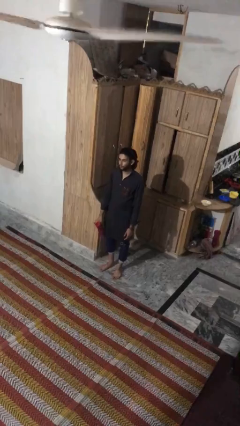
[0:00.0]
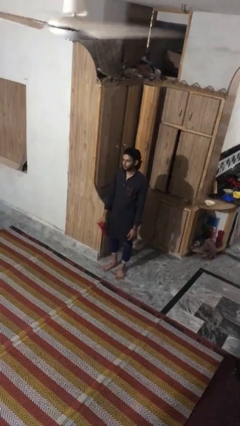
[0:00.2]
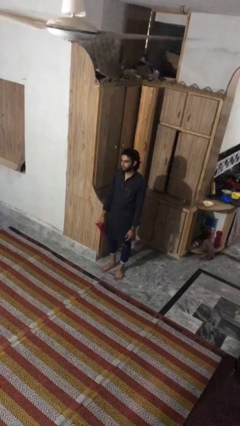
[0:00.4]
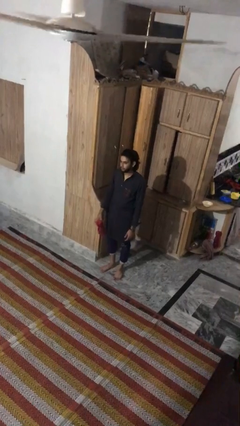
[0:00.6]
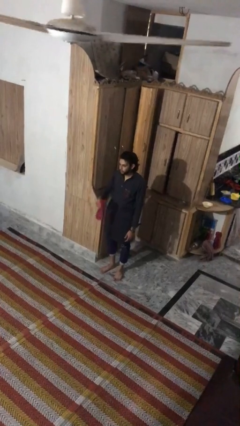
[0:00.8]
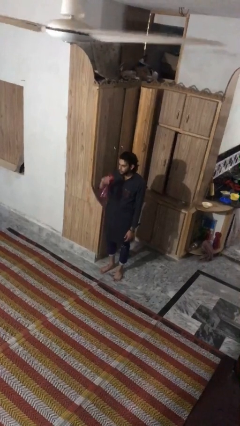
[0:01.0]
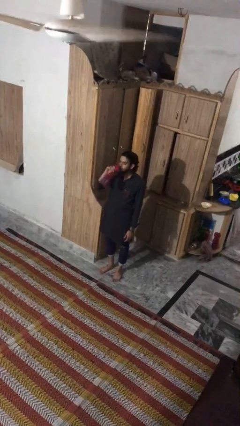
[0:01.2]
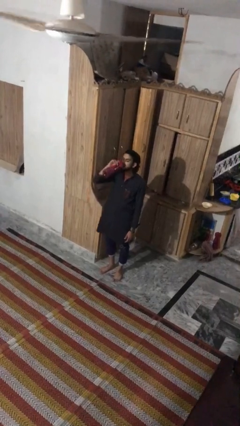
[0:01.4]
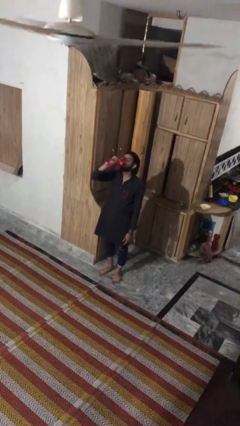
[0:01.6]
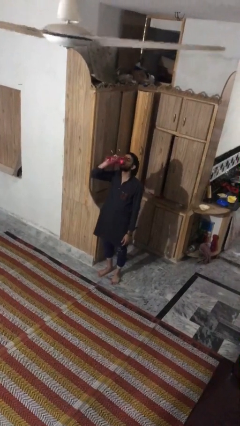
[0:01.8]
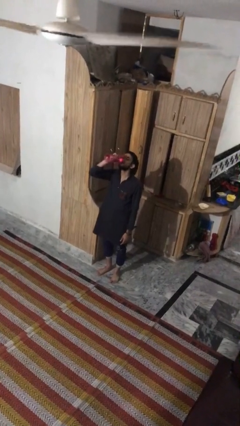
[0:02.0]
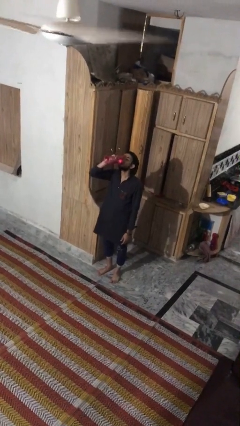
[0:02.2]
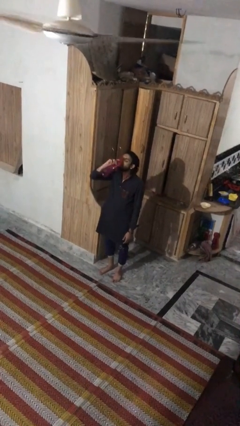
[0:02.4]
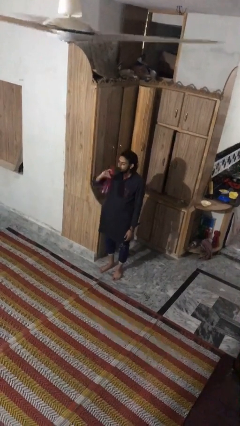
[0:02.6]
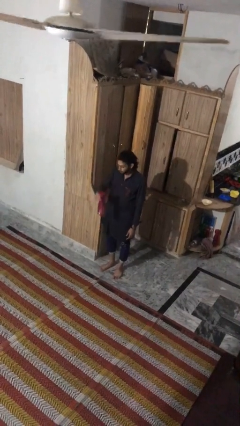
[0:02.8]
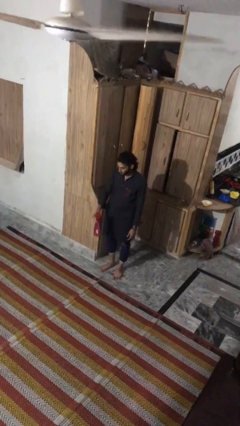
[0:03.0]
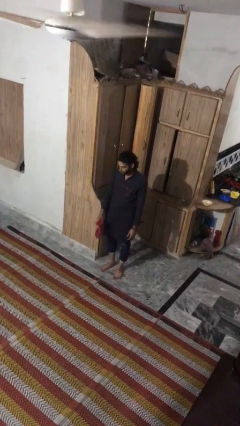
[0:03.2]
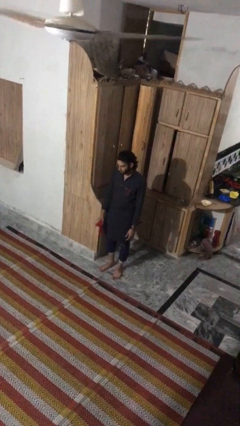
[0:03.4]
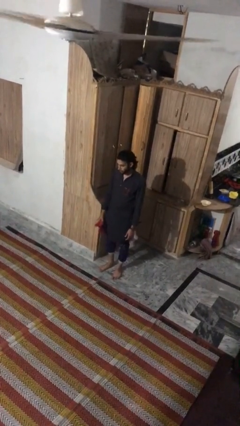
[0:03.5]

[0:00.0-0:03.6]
person drinks from bottle

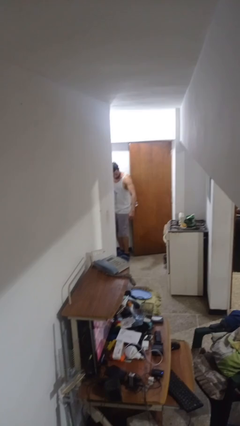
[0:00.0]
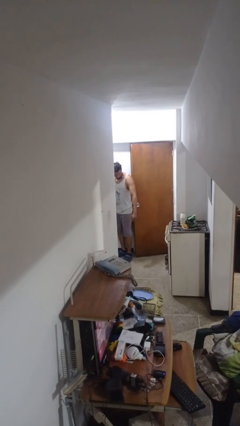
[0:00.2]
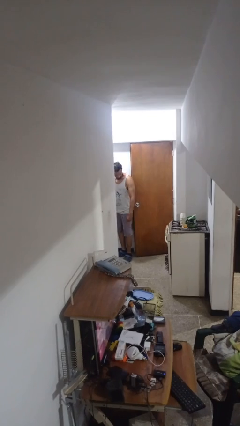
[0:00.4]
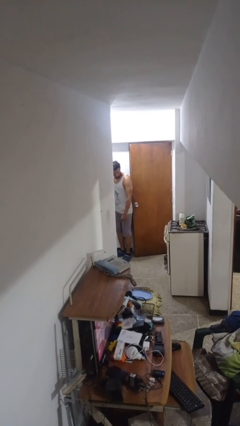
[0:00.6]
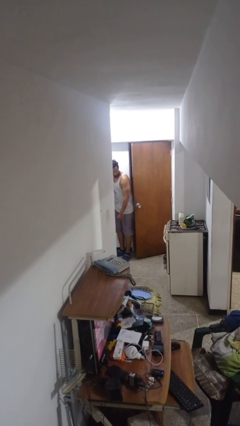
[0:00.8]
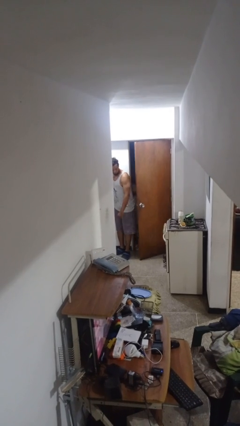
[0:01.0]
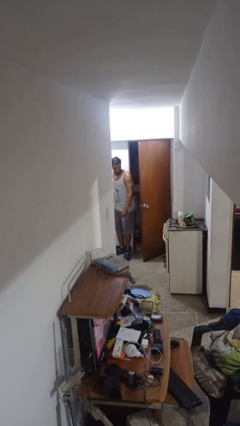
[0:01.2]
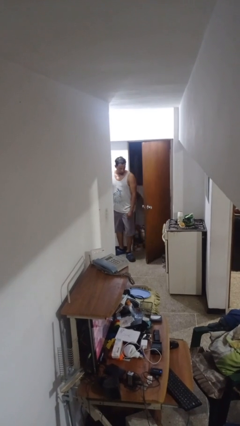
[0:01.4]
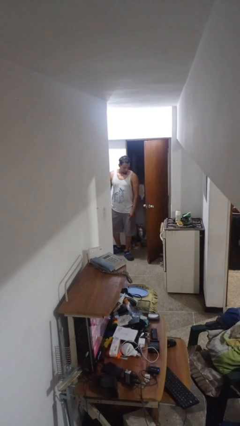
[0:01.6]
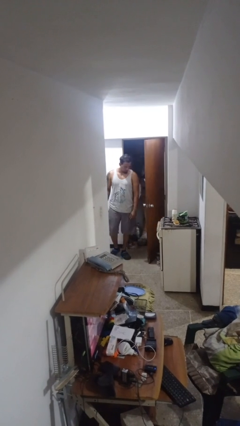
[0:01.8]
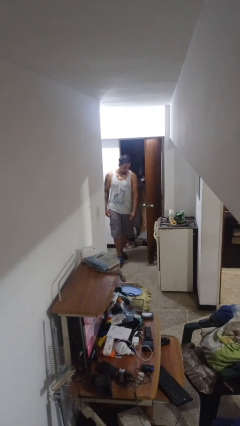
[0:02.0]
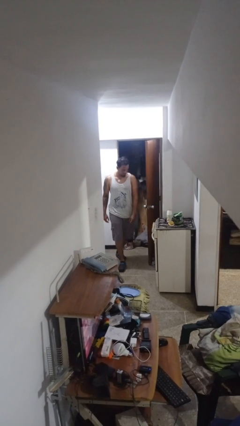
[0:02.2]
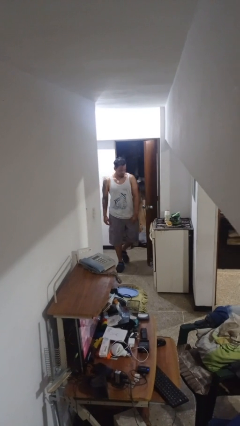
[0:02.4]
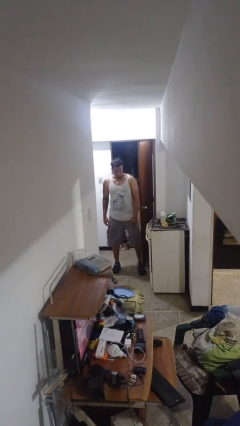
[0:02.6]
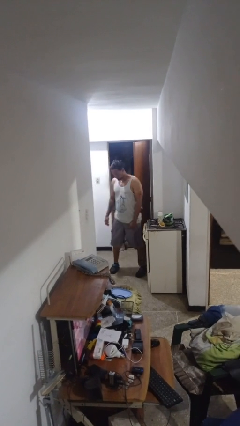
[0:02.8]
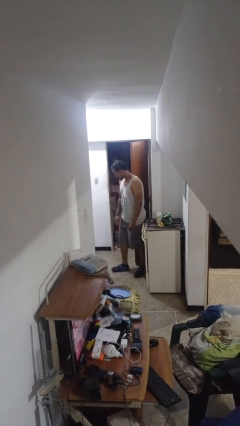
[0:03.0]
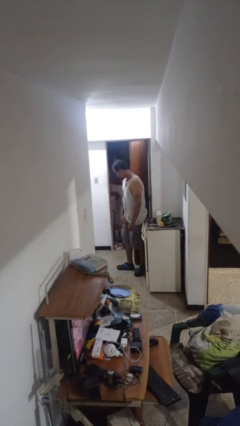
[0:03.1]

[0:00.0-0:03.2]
person opens facility door

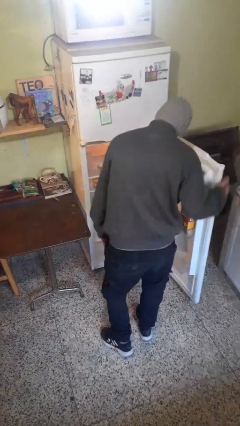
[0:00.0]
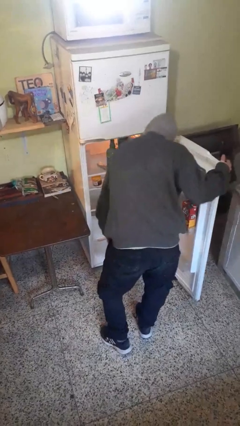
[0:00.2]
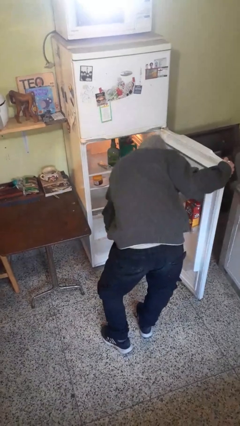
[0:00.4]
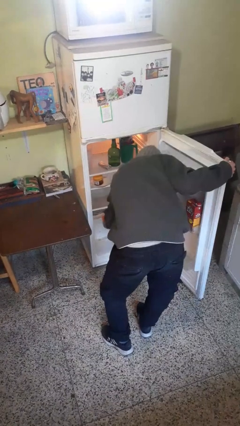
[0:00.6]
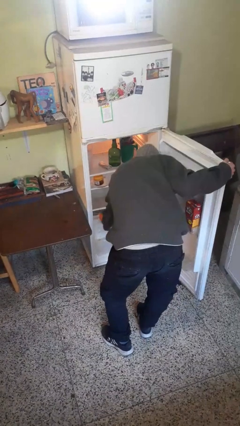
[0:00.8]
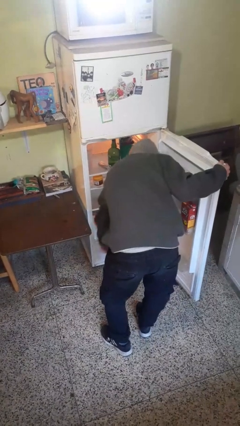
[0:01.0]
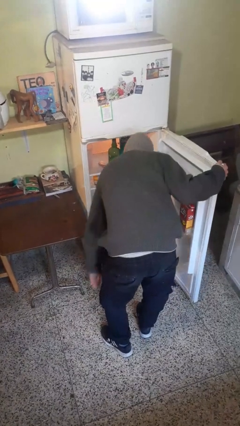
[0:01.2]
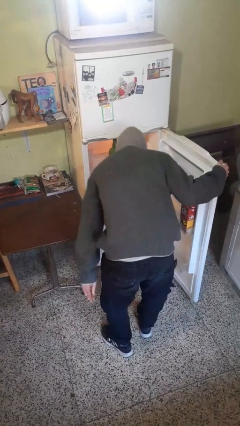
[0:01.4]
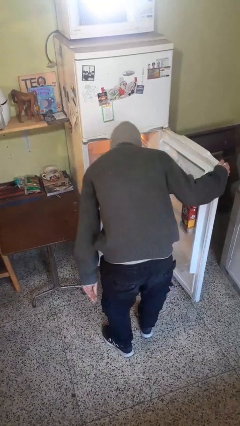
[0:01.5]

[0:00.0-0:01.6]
person puts object into refrigerator

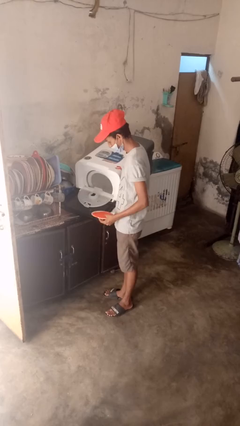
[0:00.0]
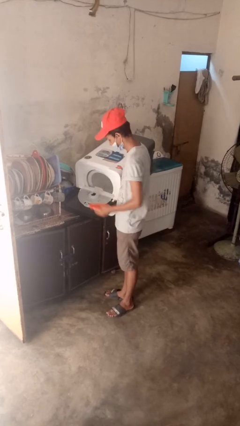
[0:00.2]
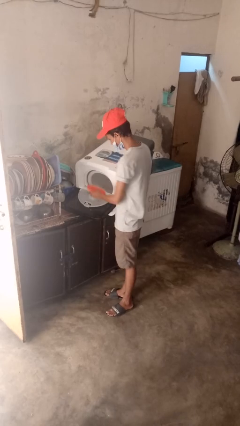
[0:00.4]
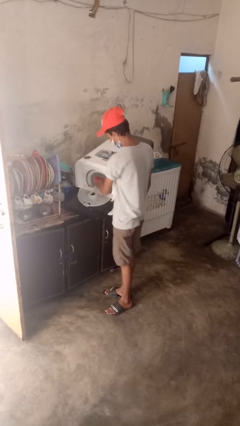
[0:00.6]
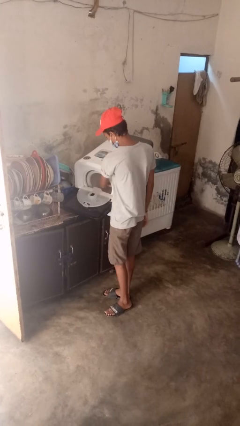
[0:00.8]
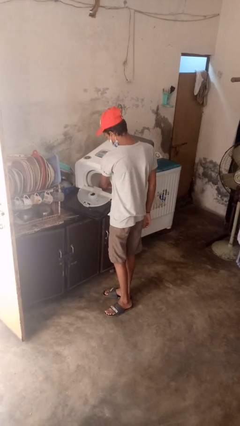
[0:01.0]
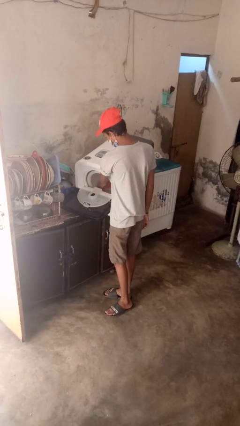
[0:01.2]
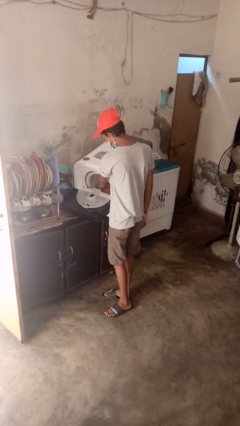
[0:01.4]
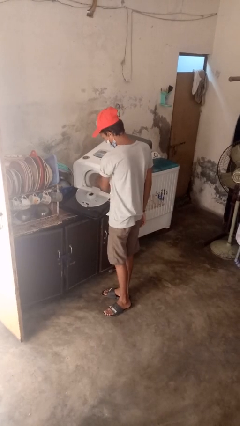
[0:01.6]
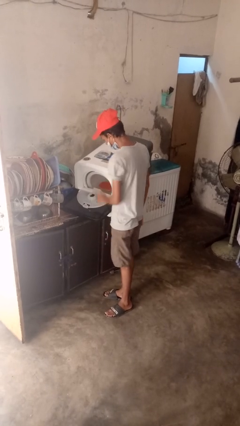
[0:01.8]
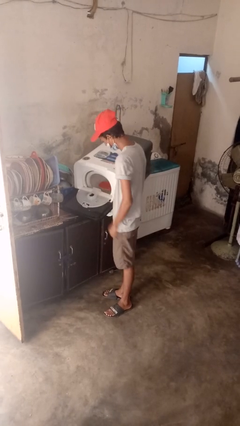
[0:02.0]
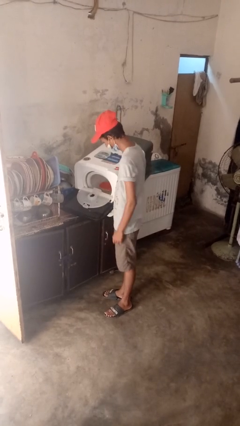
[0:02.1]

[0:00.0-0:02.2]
person loads dishwasher

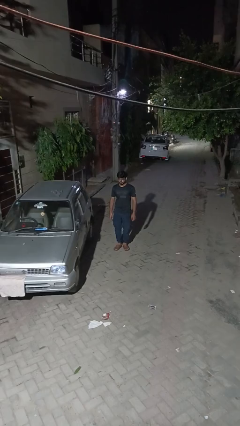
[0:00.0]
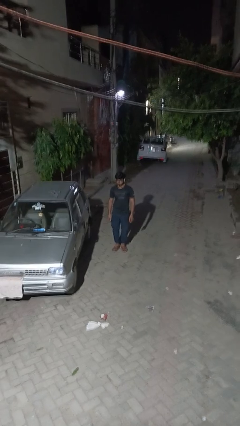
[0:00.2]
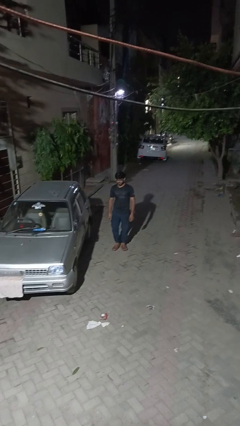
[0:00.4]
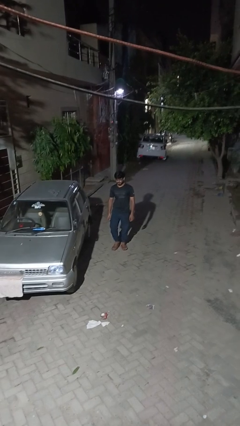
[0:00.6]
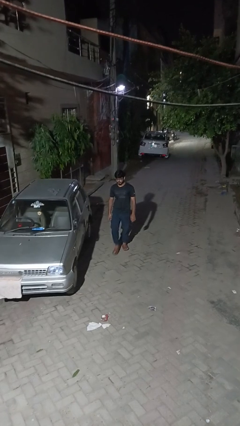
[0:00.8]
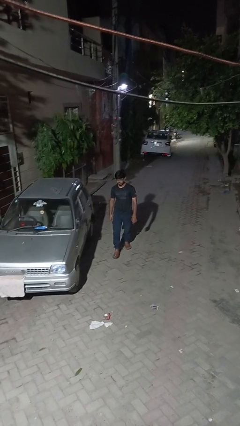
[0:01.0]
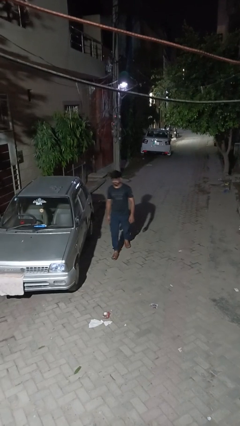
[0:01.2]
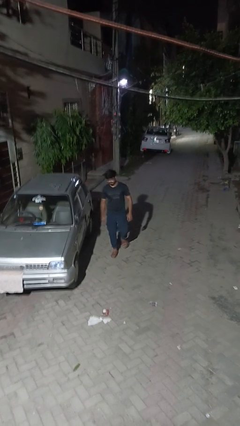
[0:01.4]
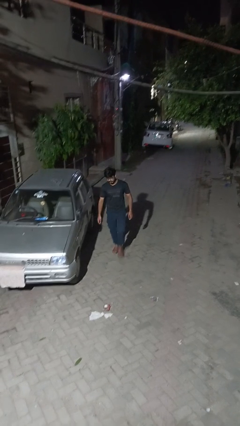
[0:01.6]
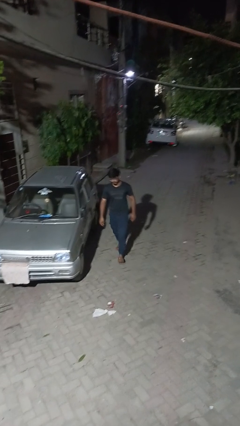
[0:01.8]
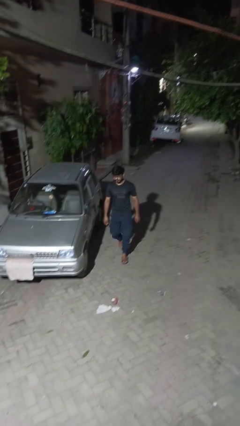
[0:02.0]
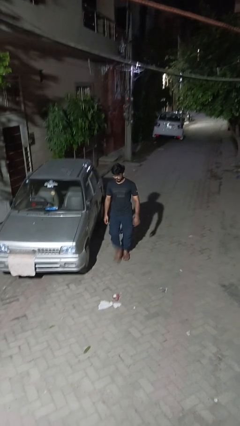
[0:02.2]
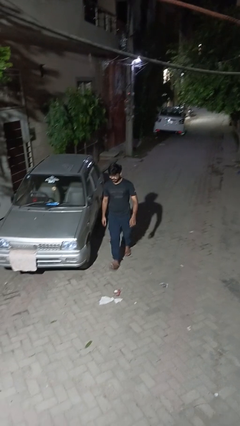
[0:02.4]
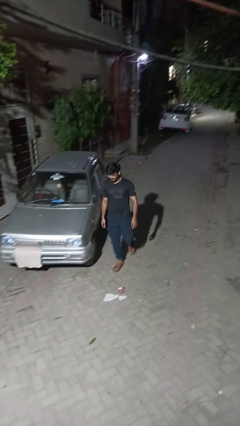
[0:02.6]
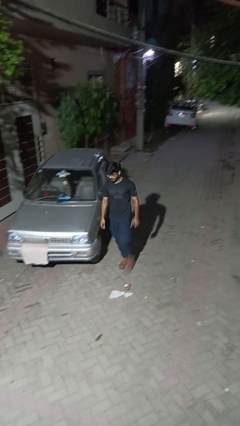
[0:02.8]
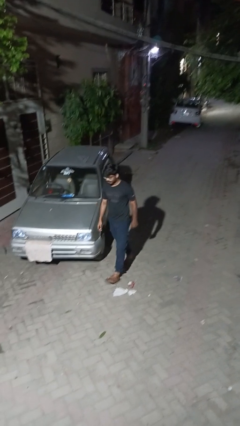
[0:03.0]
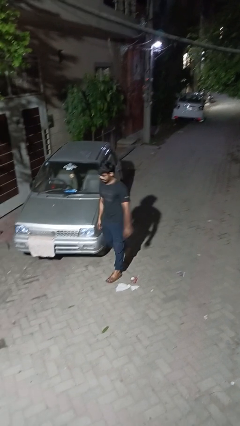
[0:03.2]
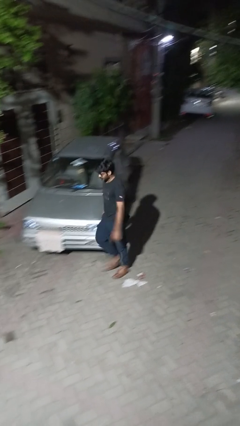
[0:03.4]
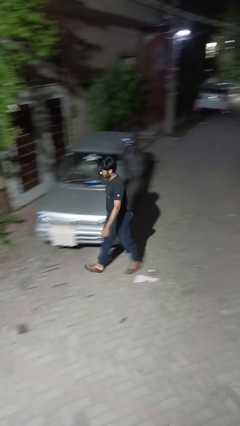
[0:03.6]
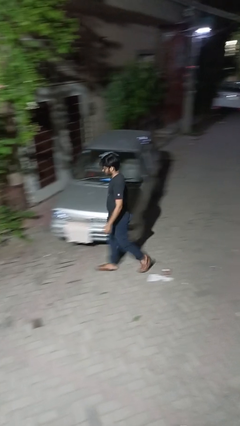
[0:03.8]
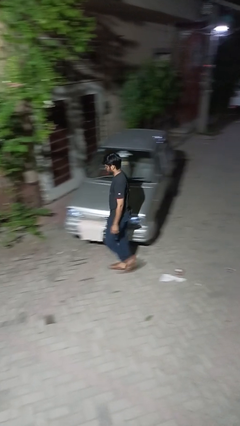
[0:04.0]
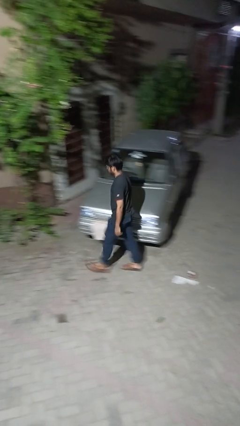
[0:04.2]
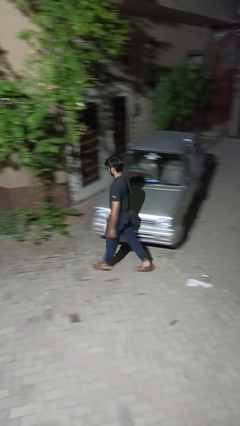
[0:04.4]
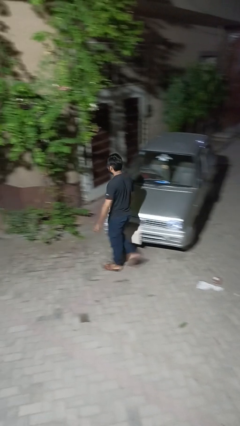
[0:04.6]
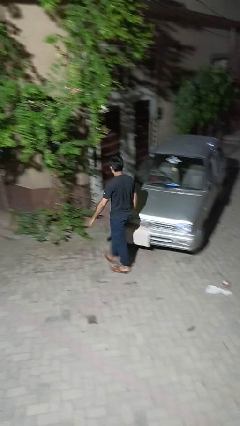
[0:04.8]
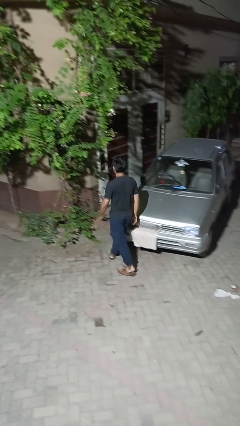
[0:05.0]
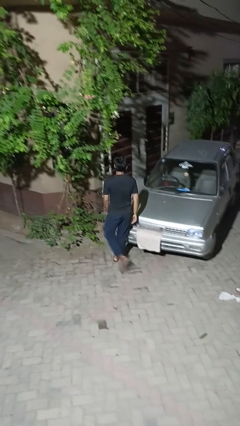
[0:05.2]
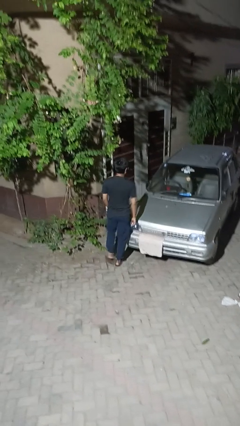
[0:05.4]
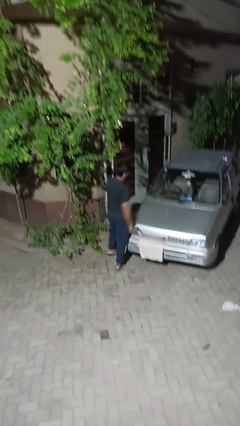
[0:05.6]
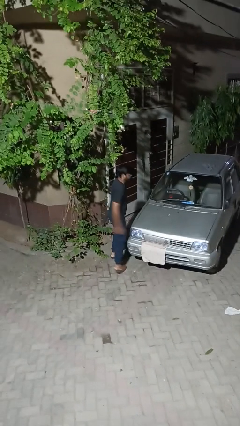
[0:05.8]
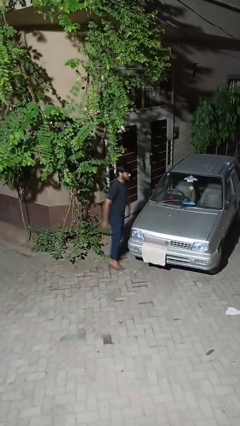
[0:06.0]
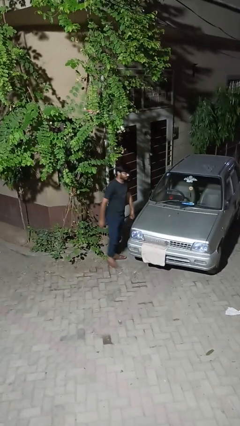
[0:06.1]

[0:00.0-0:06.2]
person walks around car

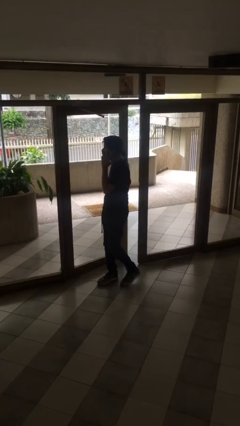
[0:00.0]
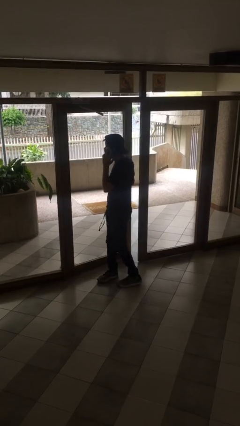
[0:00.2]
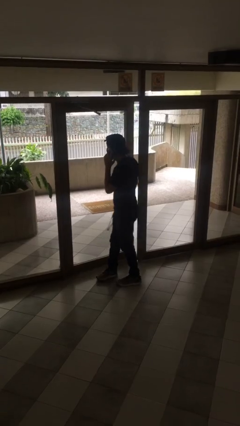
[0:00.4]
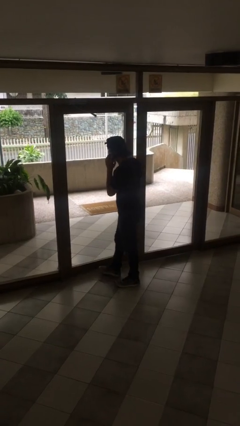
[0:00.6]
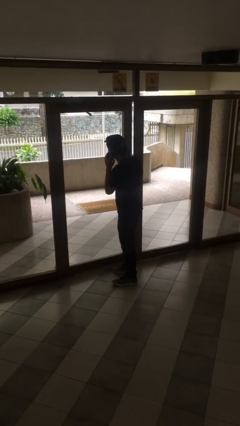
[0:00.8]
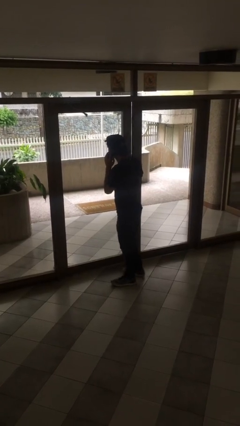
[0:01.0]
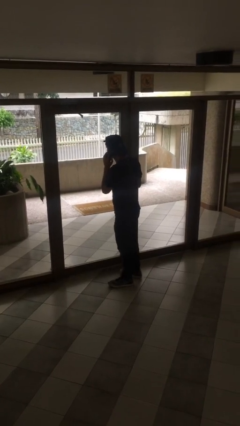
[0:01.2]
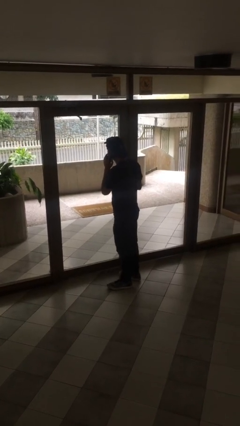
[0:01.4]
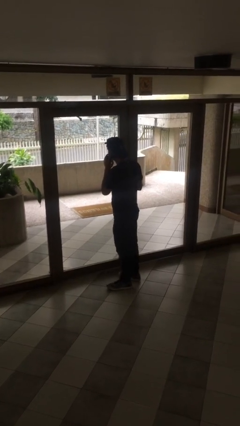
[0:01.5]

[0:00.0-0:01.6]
person closes facility door
